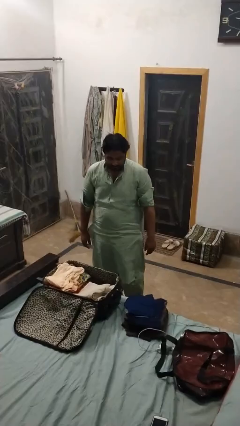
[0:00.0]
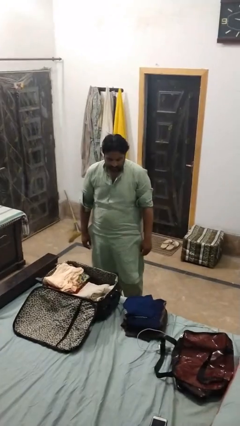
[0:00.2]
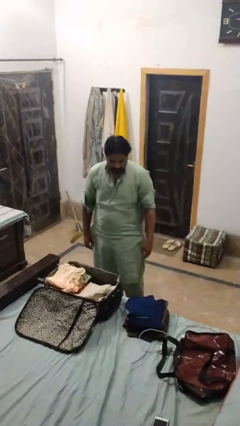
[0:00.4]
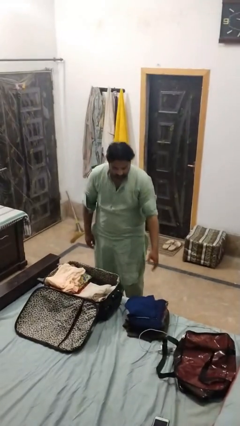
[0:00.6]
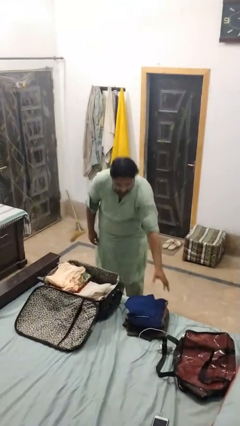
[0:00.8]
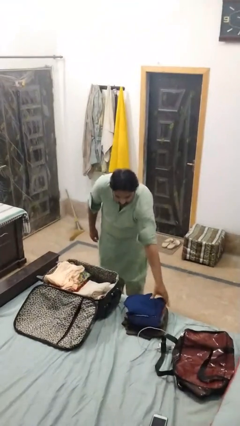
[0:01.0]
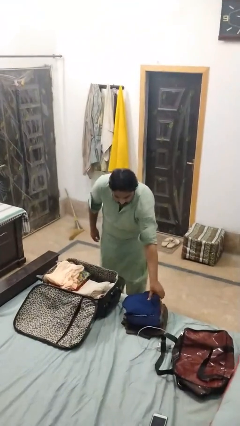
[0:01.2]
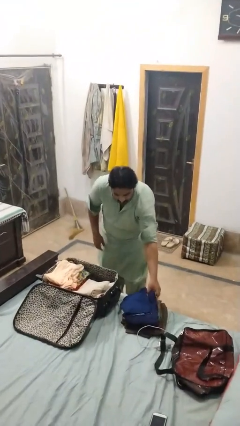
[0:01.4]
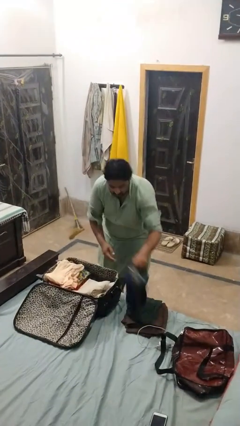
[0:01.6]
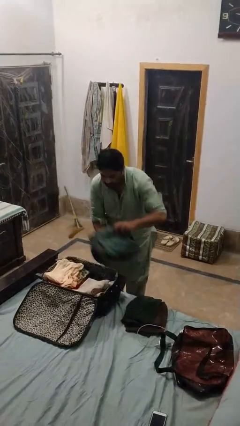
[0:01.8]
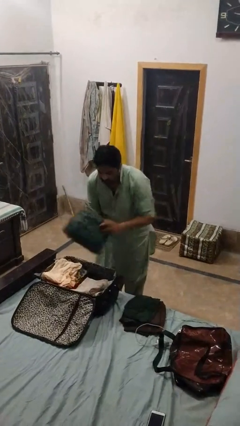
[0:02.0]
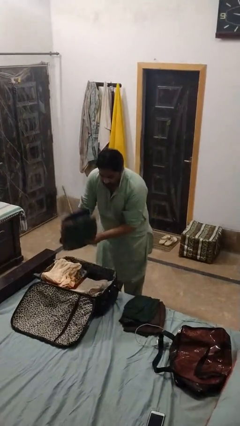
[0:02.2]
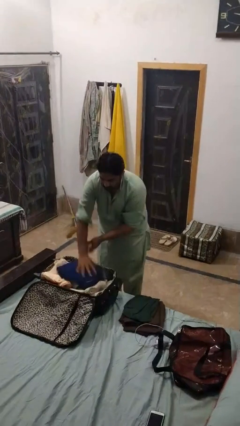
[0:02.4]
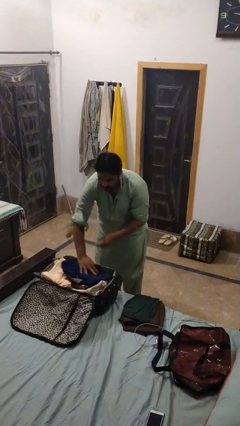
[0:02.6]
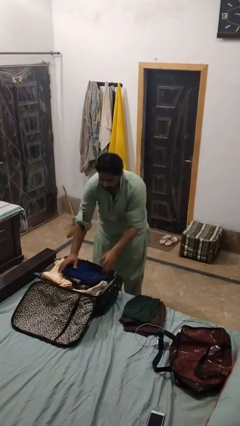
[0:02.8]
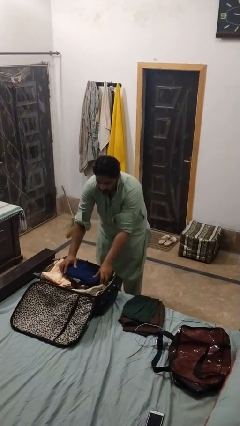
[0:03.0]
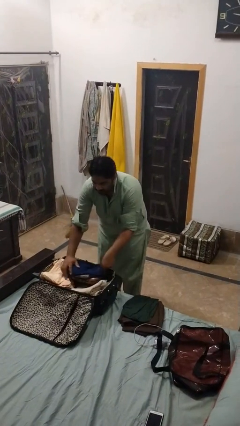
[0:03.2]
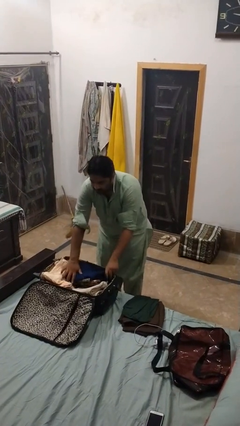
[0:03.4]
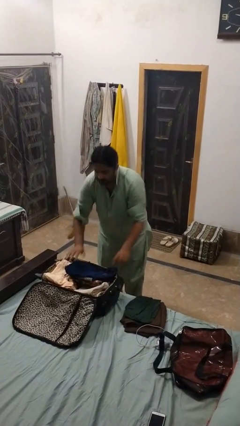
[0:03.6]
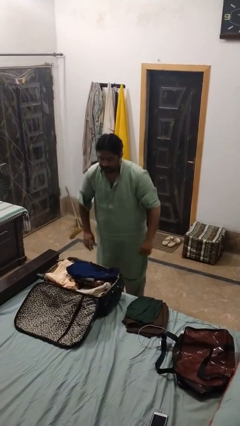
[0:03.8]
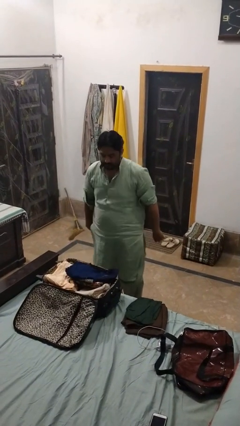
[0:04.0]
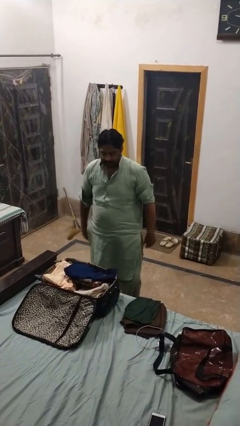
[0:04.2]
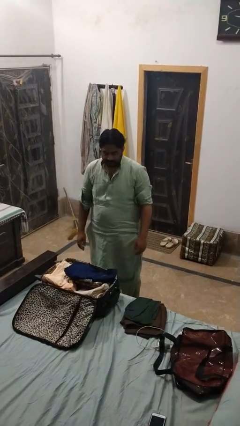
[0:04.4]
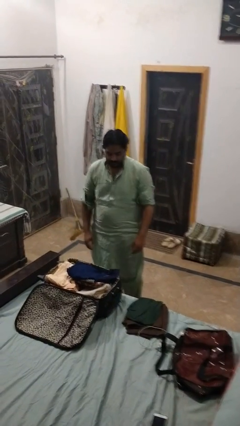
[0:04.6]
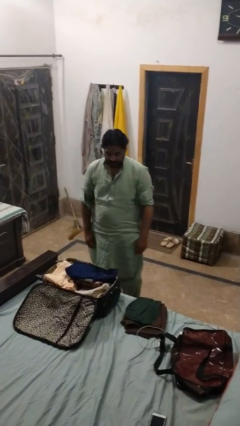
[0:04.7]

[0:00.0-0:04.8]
person loads clothes into suitcase

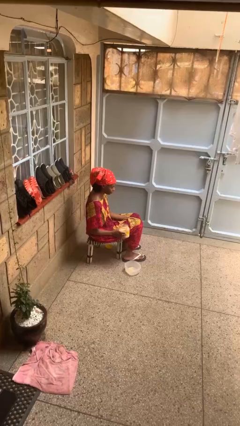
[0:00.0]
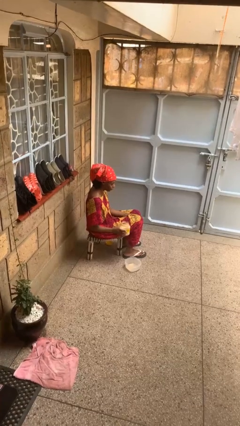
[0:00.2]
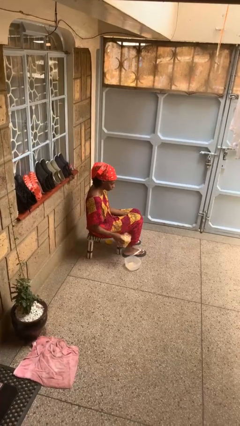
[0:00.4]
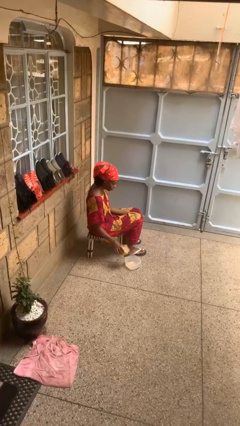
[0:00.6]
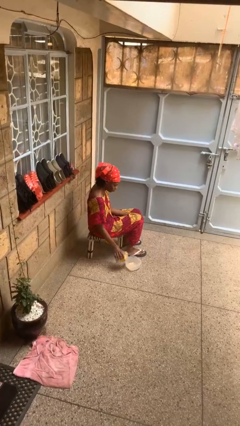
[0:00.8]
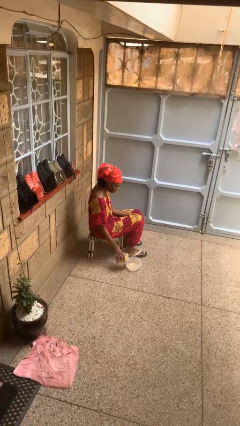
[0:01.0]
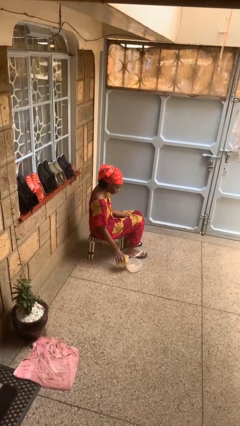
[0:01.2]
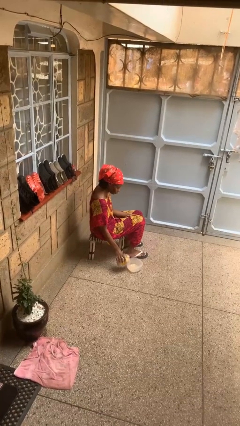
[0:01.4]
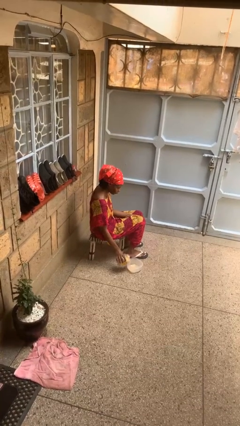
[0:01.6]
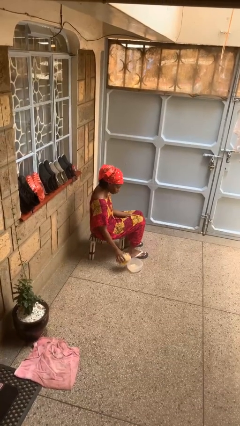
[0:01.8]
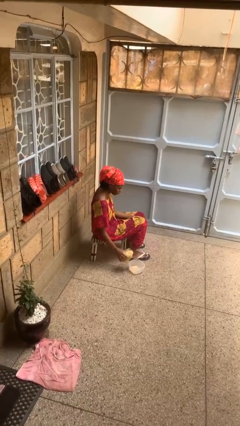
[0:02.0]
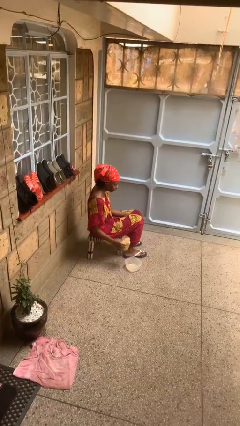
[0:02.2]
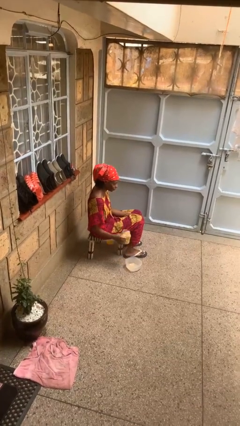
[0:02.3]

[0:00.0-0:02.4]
person pours into bowl

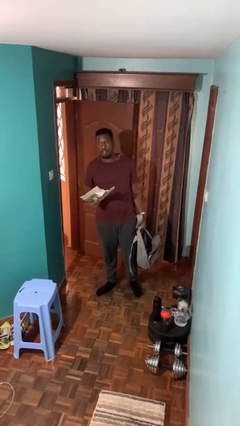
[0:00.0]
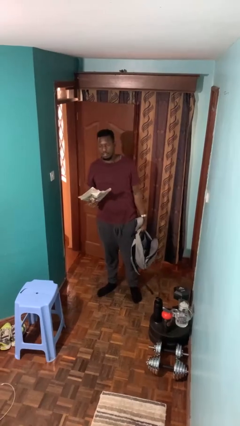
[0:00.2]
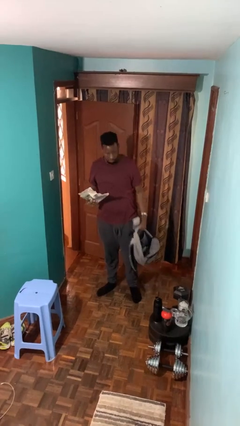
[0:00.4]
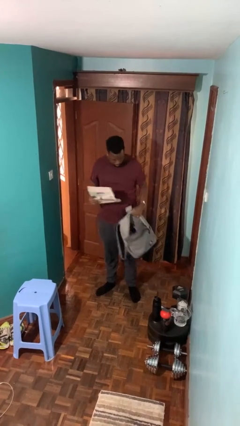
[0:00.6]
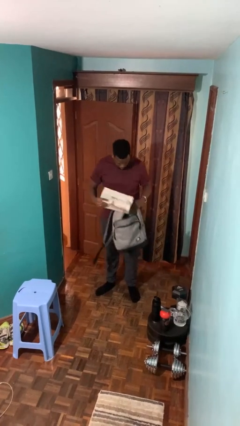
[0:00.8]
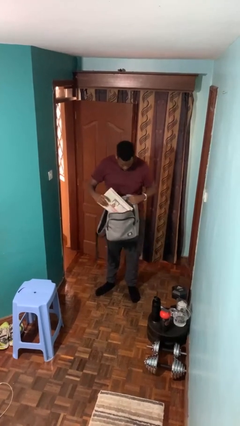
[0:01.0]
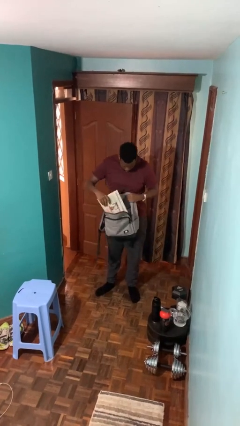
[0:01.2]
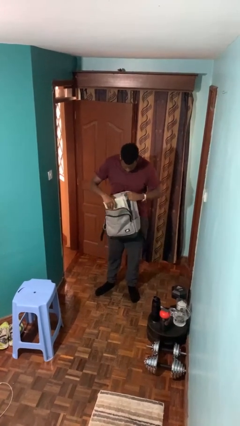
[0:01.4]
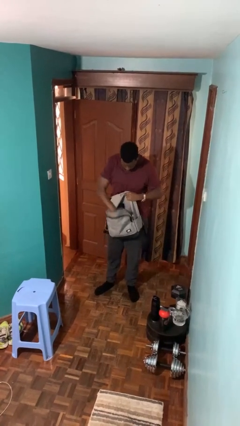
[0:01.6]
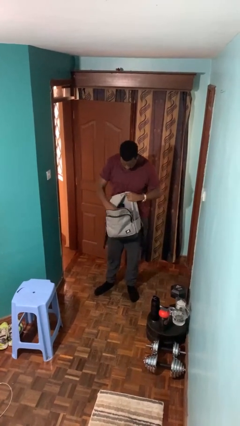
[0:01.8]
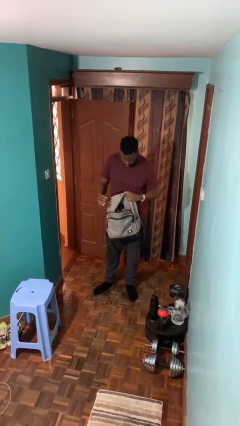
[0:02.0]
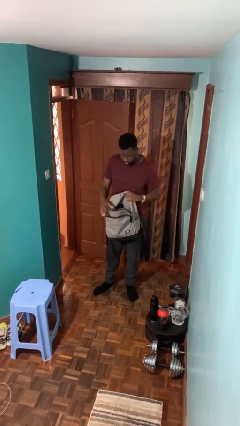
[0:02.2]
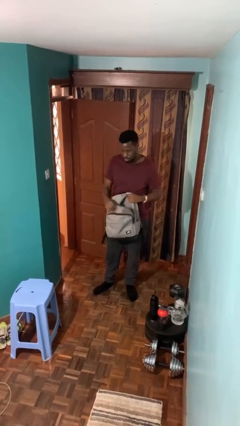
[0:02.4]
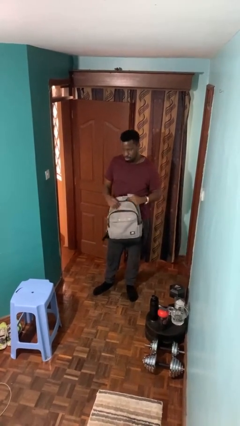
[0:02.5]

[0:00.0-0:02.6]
person puts object into backpack

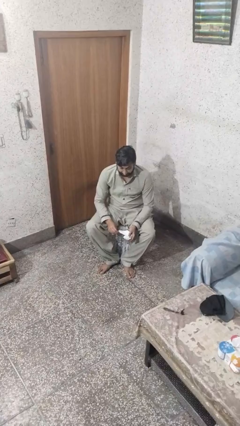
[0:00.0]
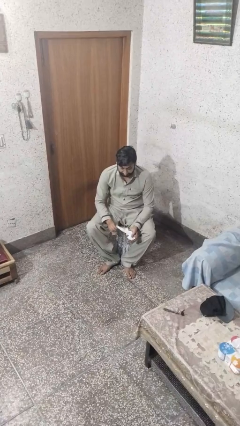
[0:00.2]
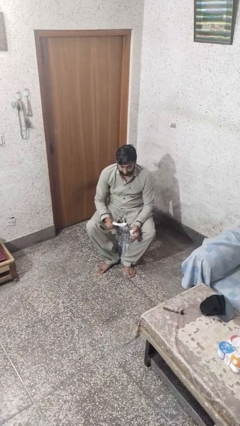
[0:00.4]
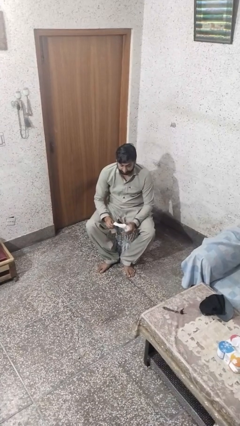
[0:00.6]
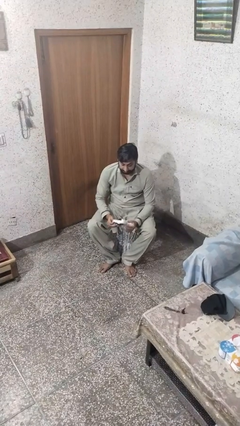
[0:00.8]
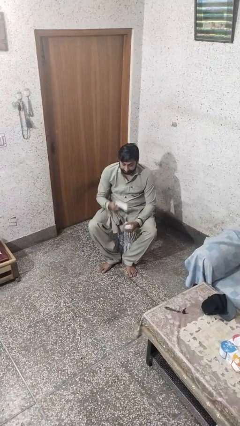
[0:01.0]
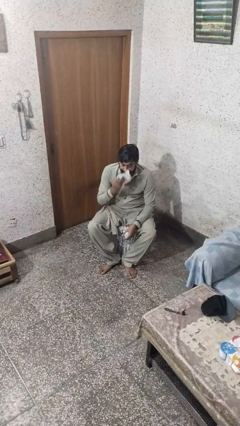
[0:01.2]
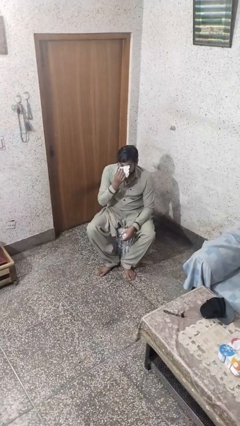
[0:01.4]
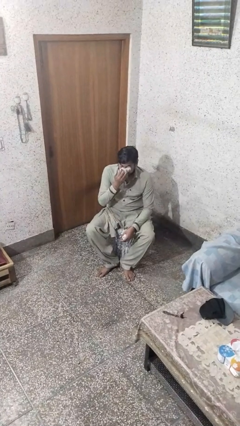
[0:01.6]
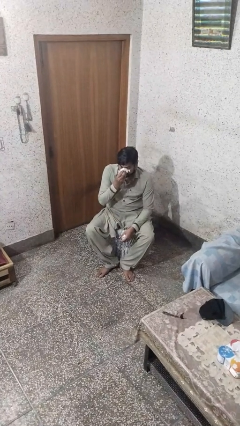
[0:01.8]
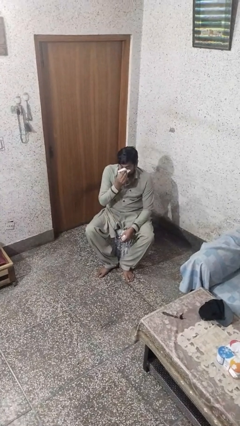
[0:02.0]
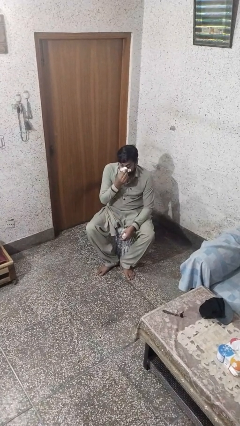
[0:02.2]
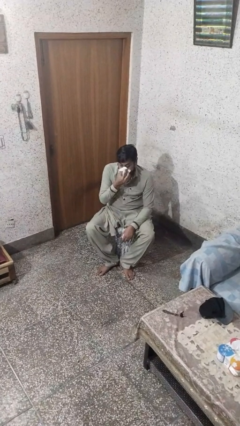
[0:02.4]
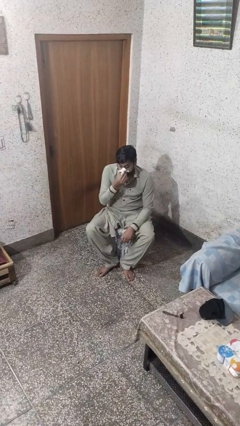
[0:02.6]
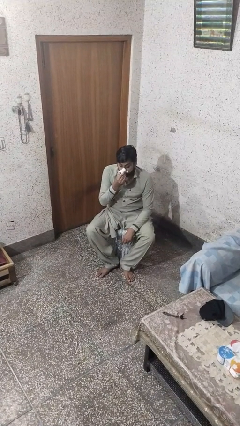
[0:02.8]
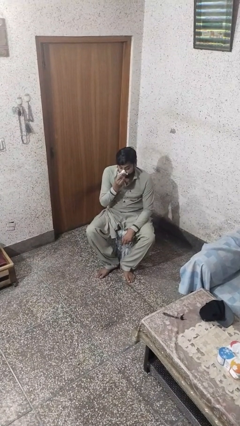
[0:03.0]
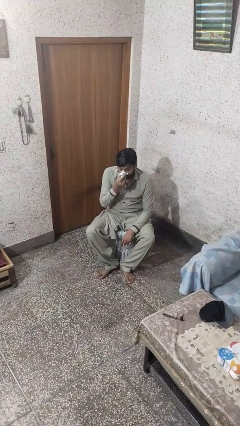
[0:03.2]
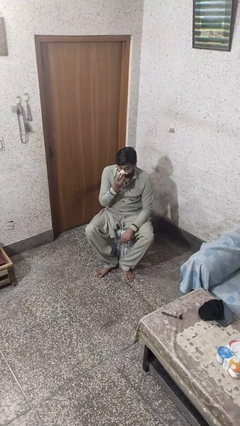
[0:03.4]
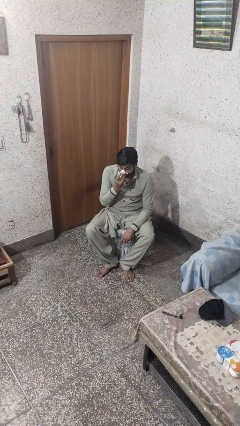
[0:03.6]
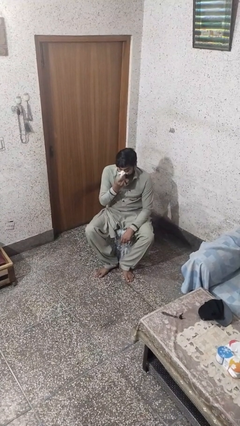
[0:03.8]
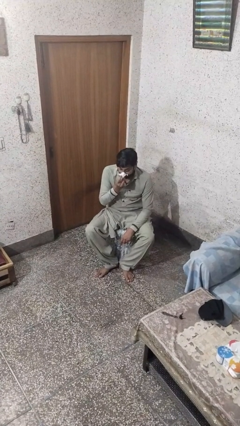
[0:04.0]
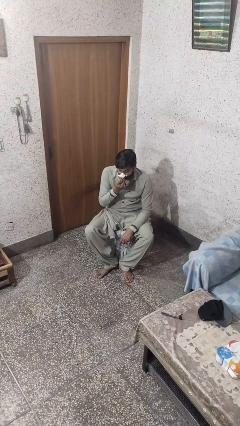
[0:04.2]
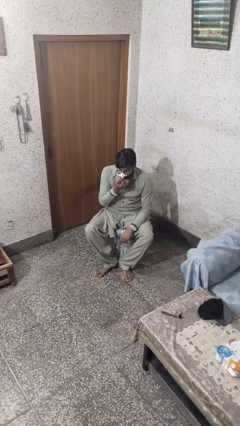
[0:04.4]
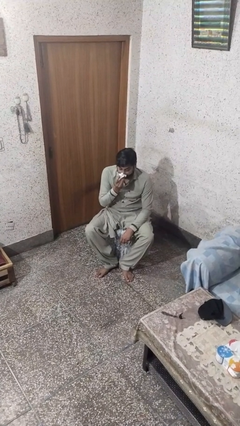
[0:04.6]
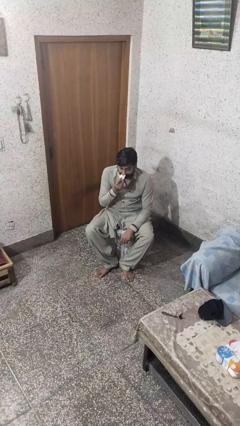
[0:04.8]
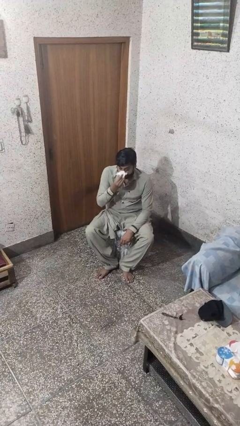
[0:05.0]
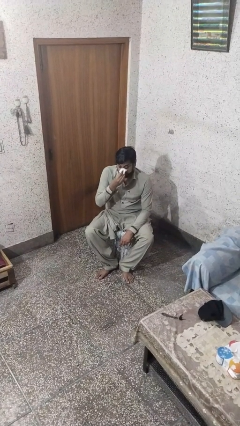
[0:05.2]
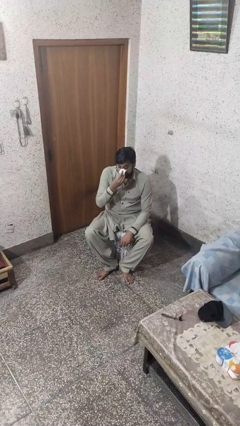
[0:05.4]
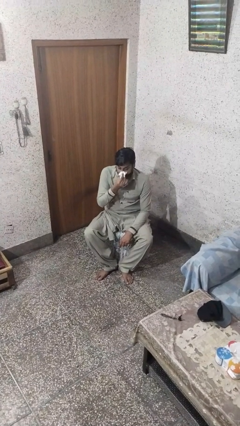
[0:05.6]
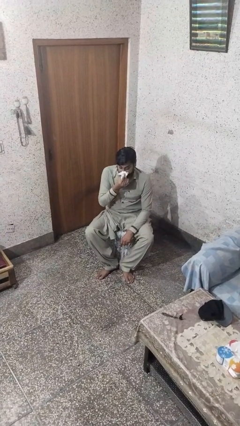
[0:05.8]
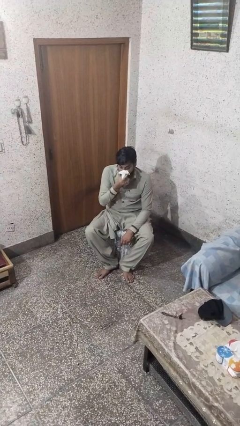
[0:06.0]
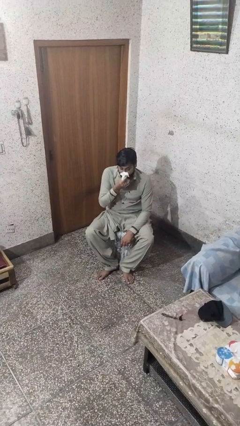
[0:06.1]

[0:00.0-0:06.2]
person blows nose

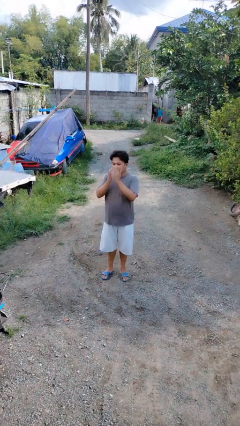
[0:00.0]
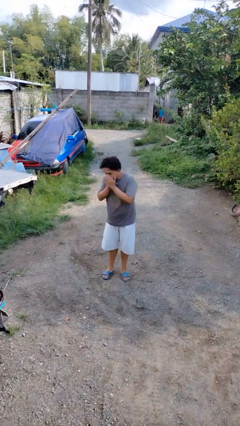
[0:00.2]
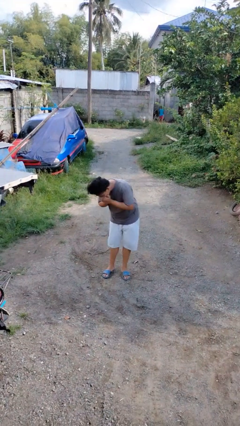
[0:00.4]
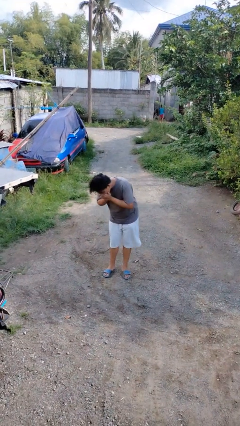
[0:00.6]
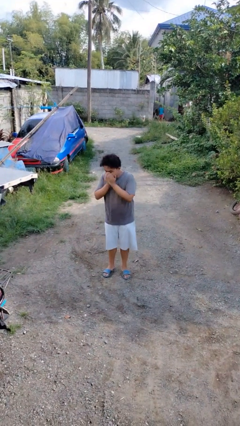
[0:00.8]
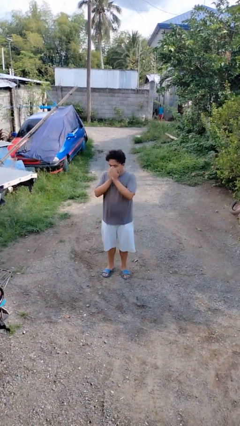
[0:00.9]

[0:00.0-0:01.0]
person sneezes into hand

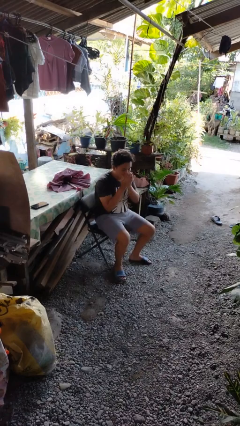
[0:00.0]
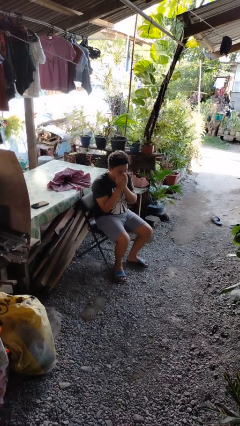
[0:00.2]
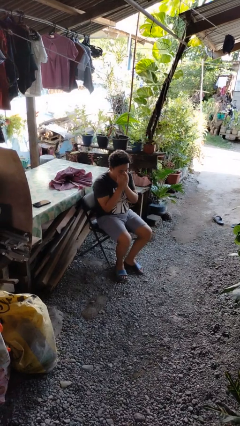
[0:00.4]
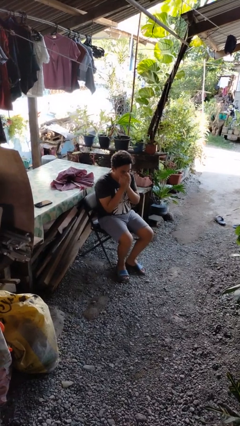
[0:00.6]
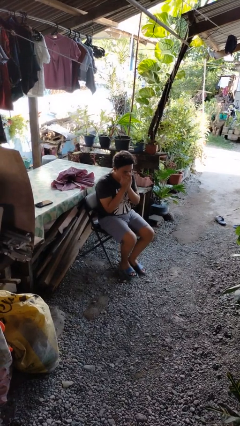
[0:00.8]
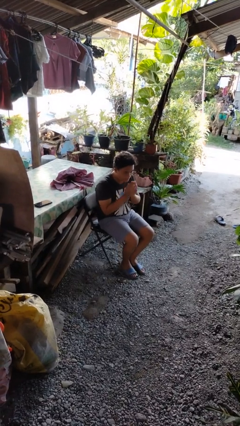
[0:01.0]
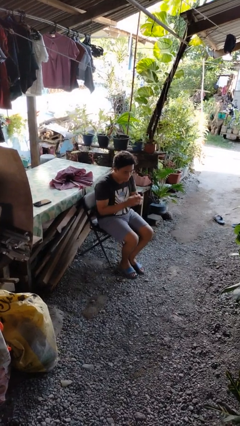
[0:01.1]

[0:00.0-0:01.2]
person blows into hands
